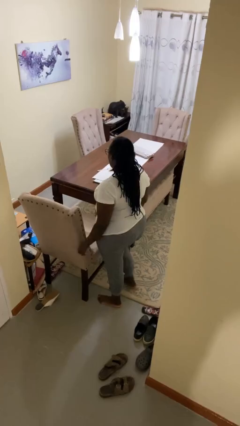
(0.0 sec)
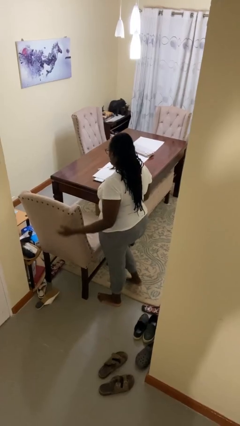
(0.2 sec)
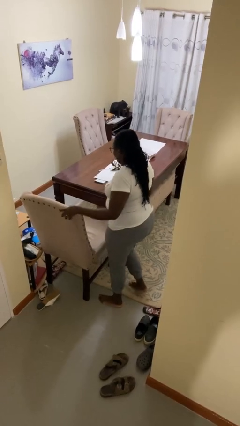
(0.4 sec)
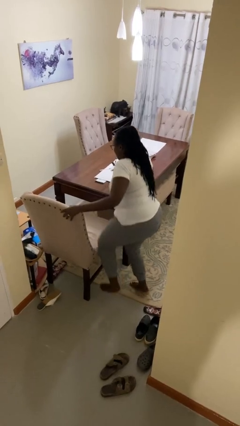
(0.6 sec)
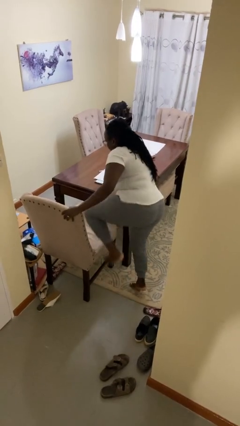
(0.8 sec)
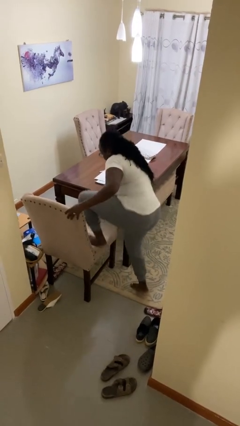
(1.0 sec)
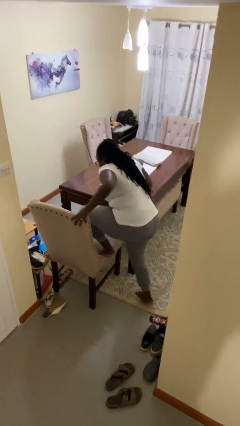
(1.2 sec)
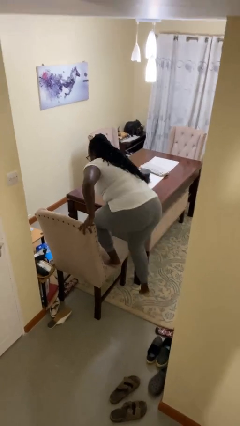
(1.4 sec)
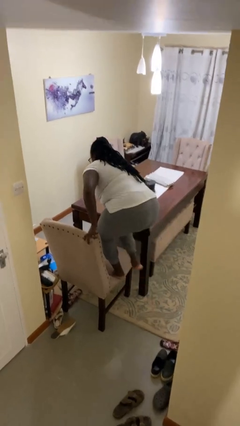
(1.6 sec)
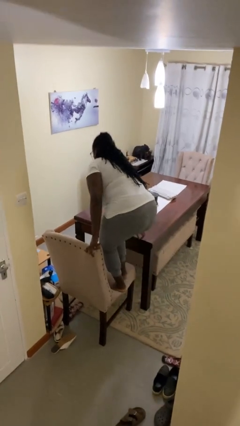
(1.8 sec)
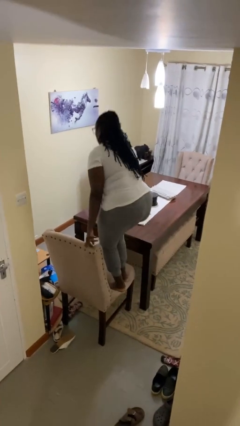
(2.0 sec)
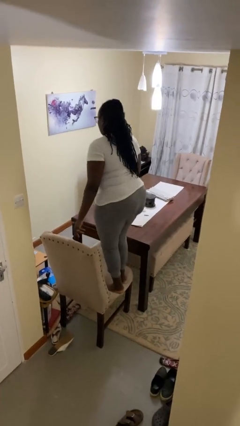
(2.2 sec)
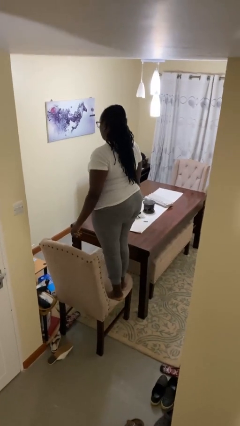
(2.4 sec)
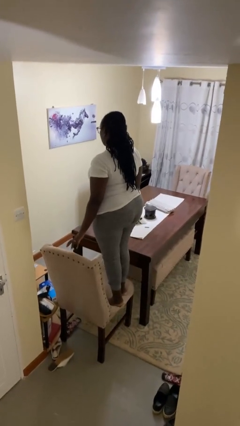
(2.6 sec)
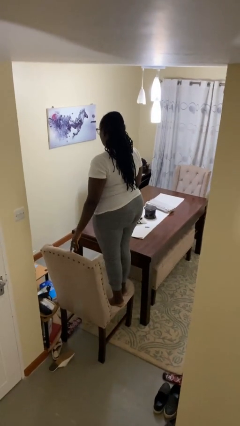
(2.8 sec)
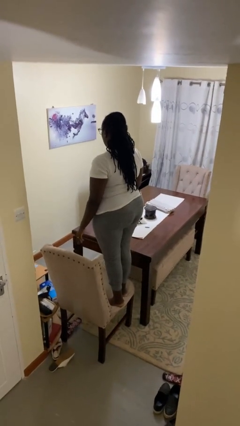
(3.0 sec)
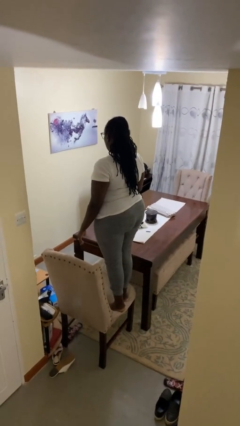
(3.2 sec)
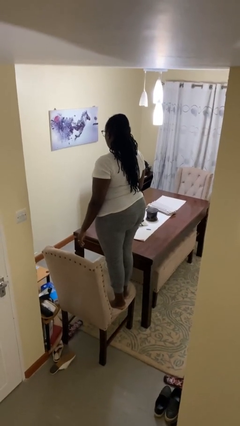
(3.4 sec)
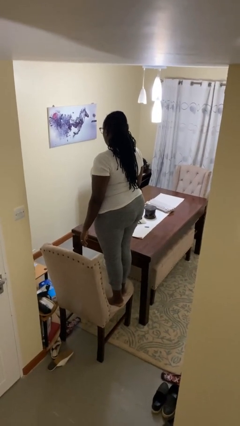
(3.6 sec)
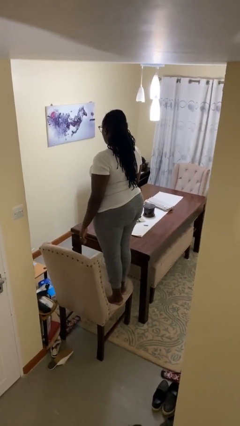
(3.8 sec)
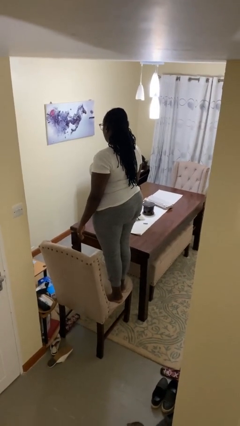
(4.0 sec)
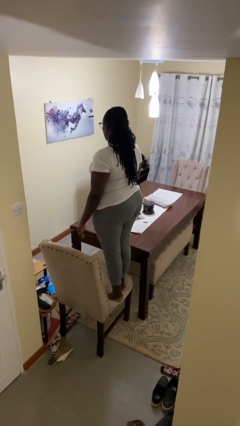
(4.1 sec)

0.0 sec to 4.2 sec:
person climbs on chair

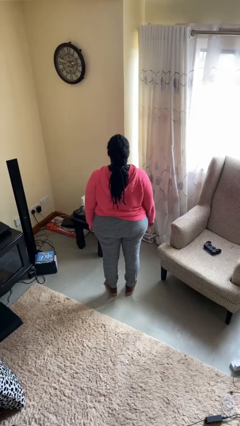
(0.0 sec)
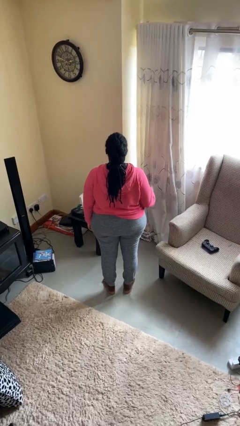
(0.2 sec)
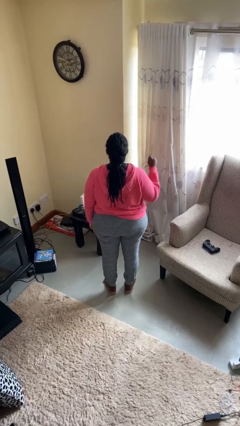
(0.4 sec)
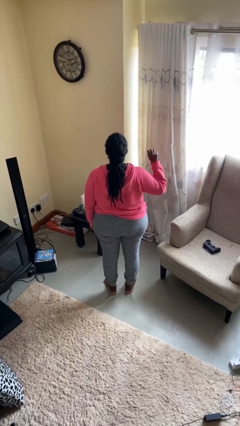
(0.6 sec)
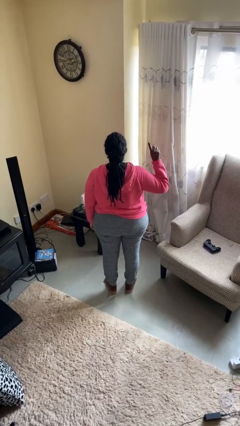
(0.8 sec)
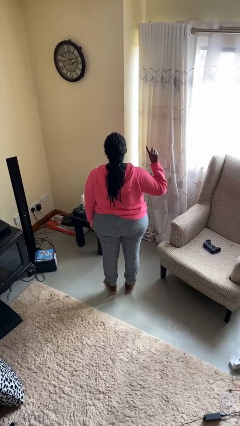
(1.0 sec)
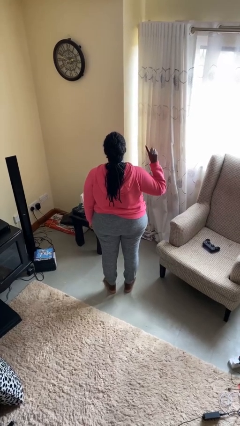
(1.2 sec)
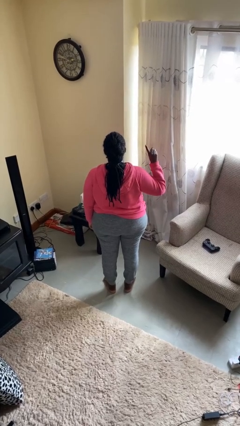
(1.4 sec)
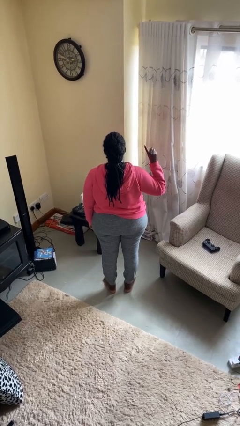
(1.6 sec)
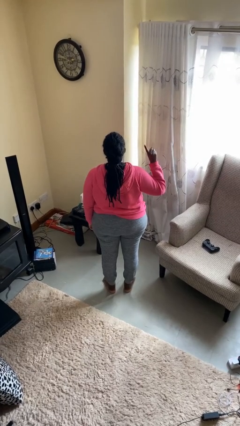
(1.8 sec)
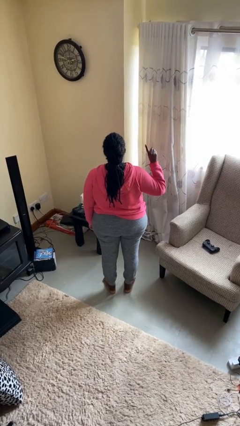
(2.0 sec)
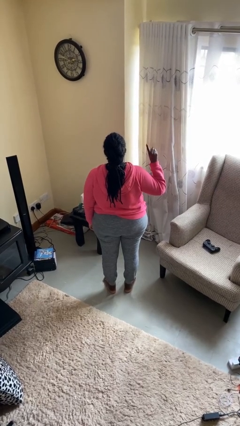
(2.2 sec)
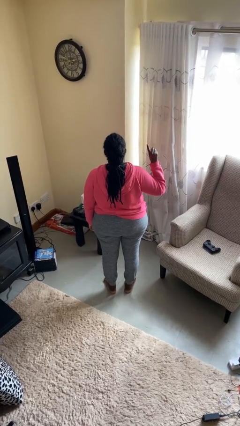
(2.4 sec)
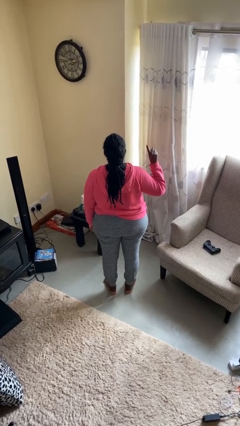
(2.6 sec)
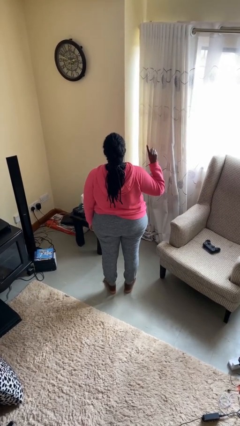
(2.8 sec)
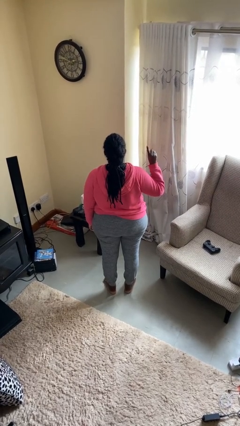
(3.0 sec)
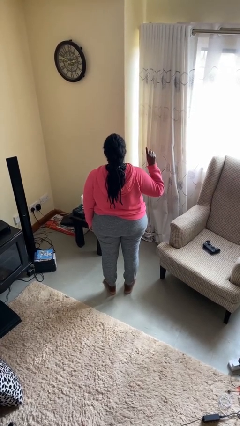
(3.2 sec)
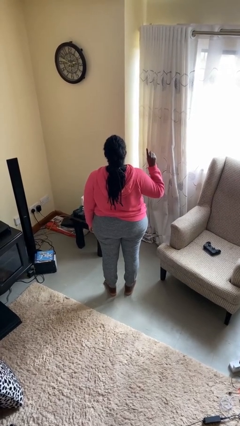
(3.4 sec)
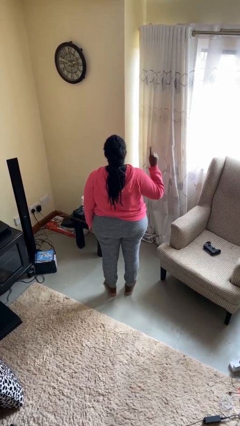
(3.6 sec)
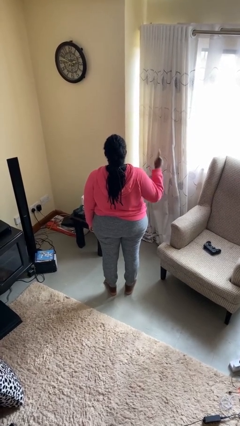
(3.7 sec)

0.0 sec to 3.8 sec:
person gestures number one

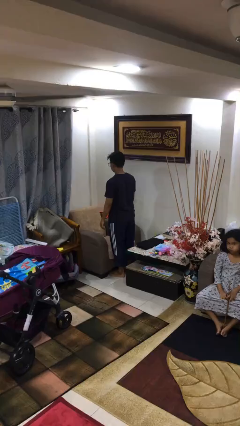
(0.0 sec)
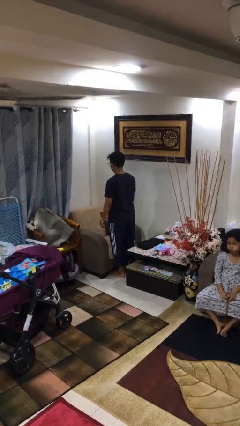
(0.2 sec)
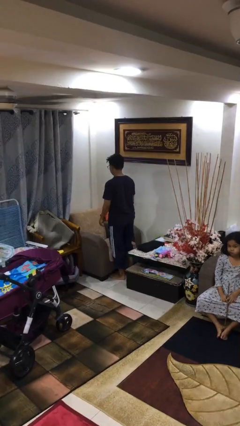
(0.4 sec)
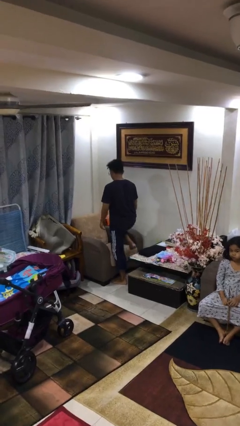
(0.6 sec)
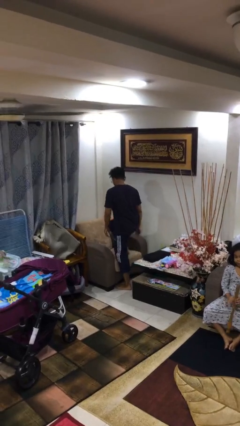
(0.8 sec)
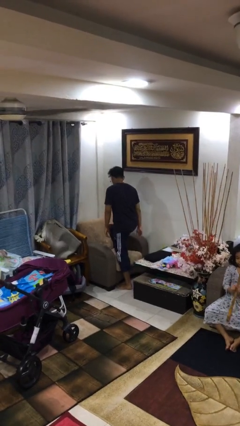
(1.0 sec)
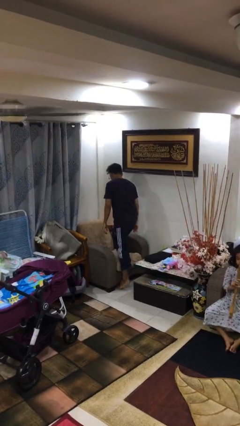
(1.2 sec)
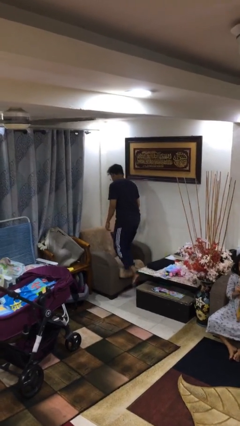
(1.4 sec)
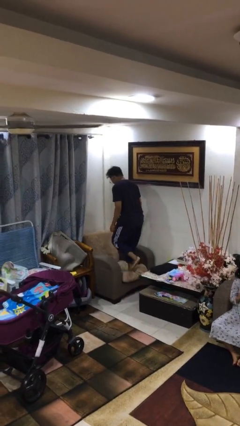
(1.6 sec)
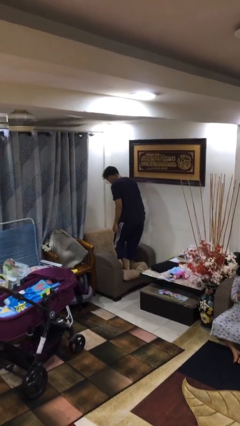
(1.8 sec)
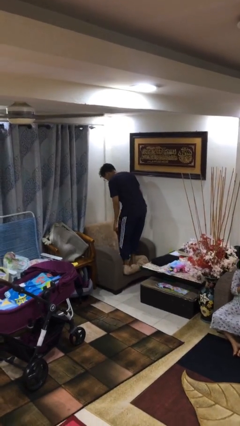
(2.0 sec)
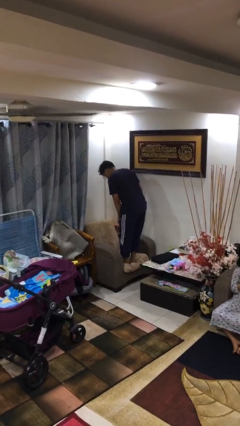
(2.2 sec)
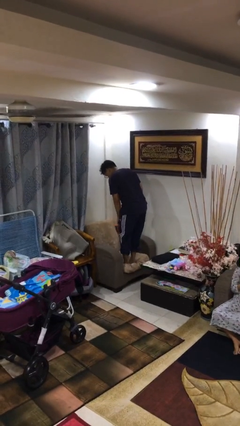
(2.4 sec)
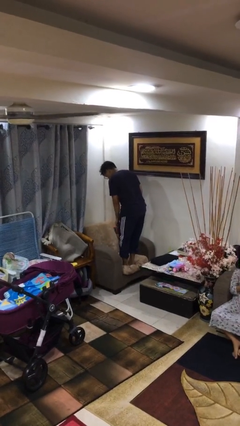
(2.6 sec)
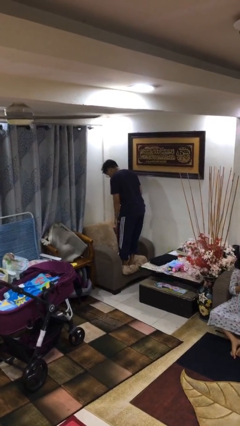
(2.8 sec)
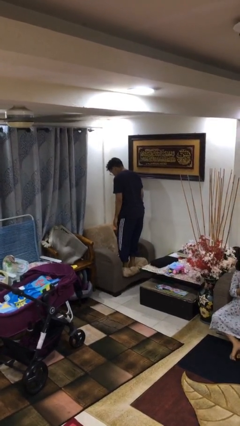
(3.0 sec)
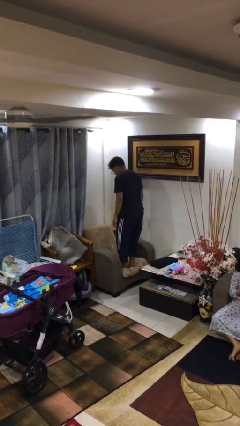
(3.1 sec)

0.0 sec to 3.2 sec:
person climbs on couch

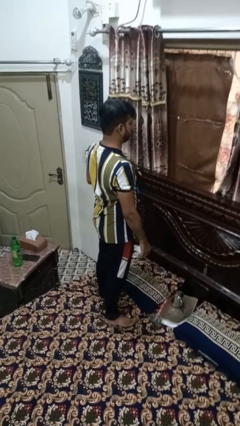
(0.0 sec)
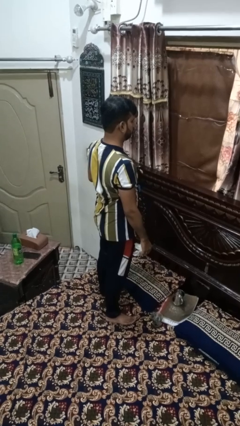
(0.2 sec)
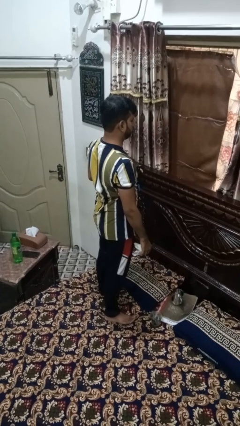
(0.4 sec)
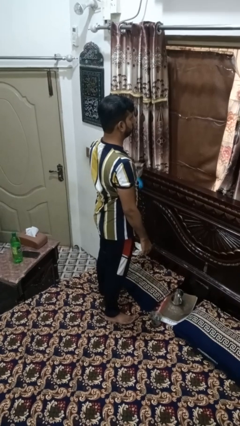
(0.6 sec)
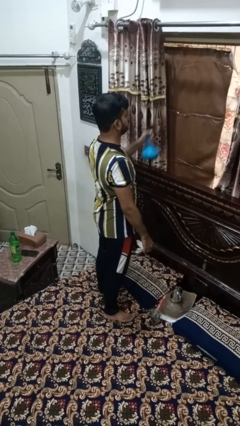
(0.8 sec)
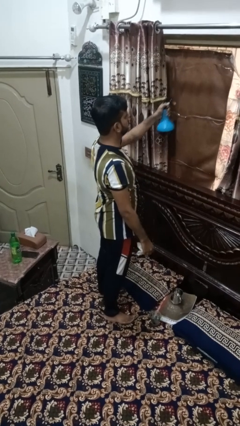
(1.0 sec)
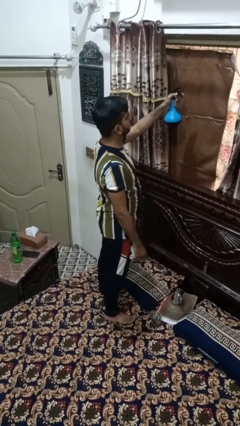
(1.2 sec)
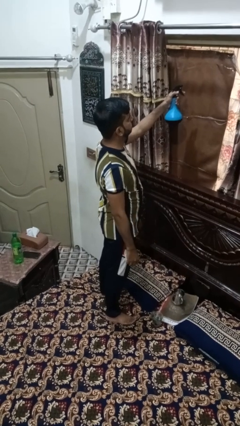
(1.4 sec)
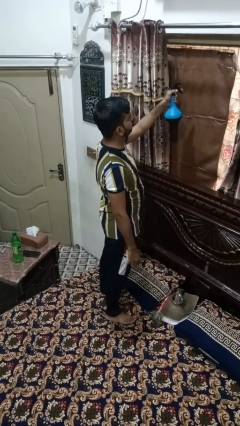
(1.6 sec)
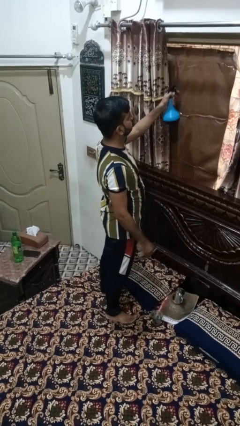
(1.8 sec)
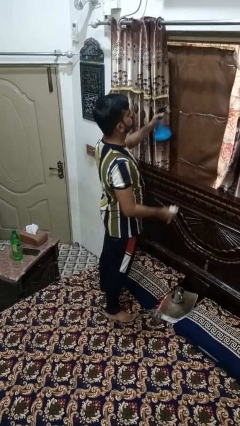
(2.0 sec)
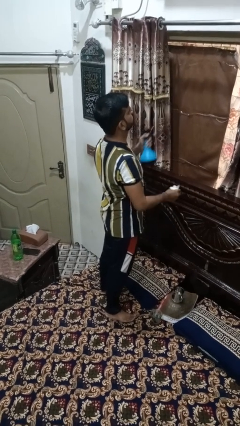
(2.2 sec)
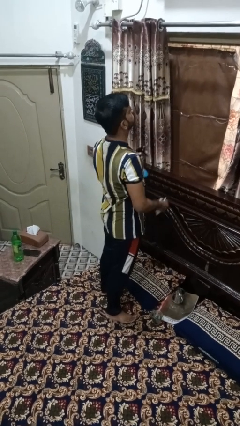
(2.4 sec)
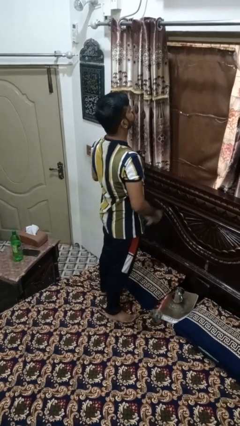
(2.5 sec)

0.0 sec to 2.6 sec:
person sprays from bottle

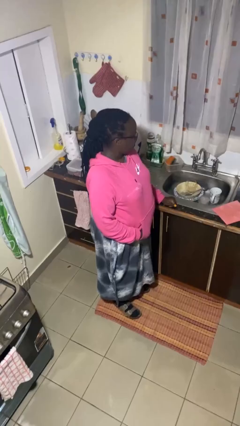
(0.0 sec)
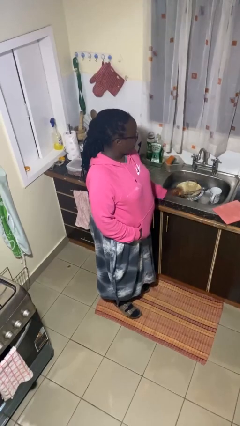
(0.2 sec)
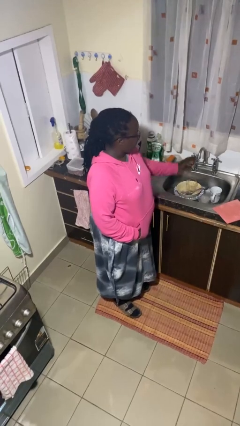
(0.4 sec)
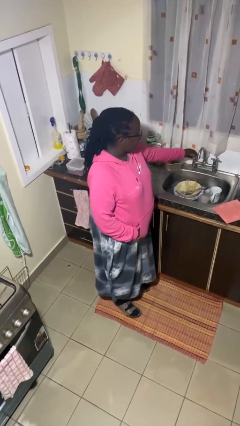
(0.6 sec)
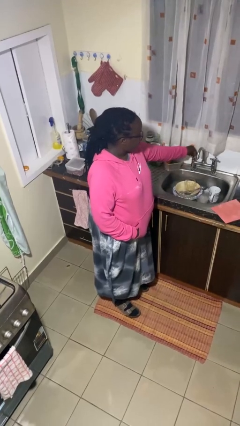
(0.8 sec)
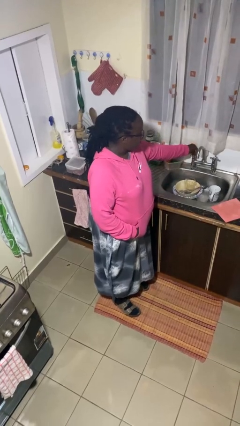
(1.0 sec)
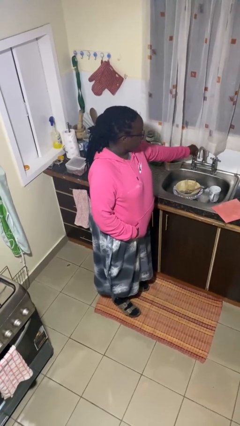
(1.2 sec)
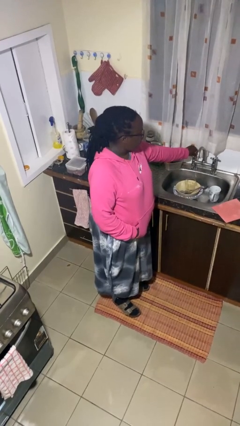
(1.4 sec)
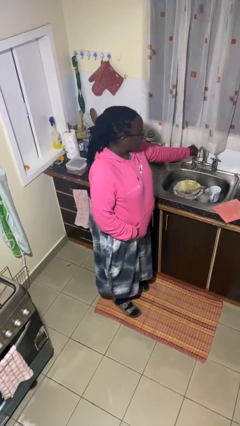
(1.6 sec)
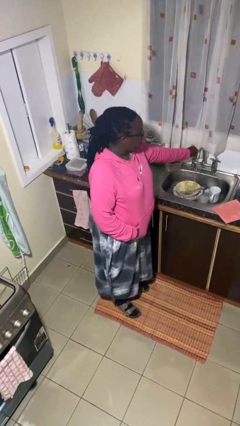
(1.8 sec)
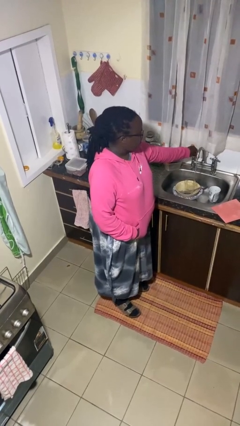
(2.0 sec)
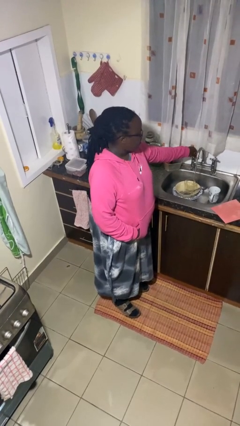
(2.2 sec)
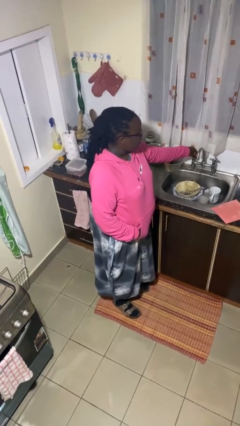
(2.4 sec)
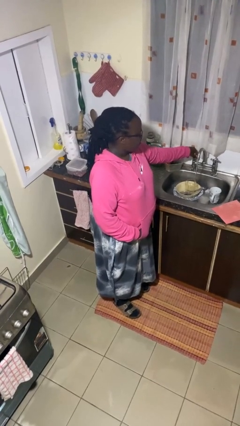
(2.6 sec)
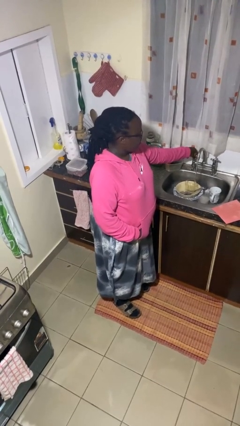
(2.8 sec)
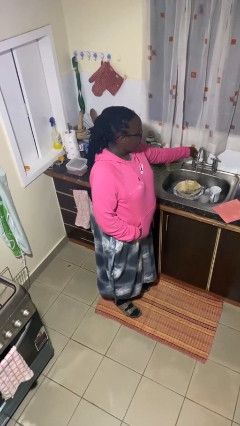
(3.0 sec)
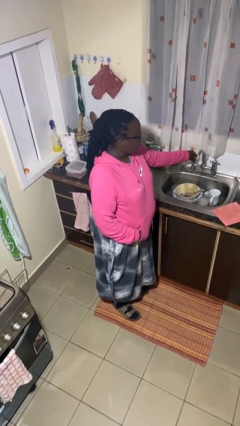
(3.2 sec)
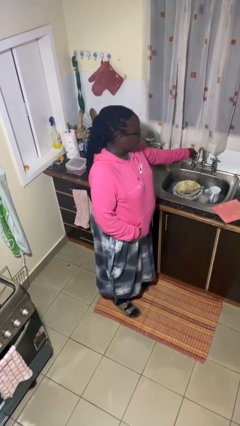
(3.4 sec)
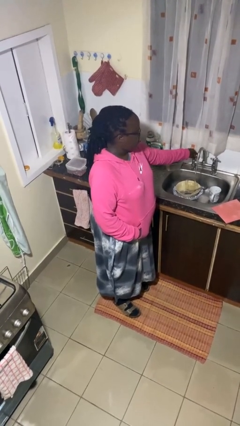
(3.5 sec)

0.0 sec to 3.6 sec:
person turns on faucet
